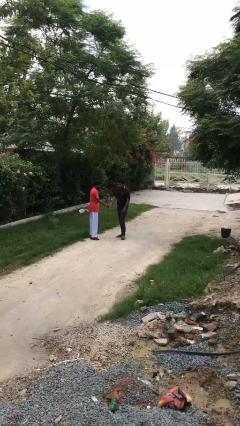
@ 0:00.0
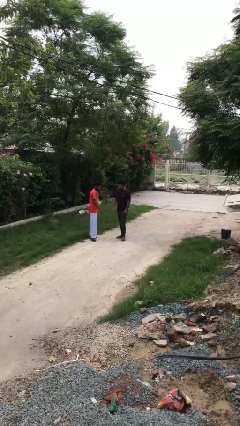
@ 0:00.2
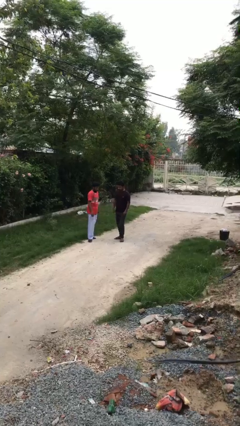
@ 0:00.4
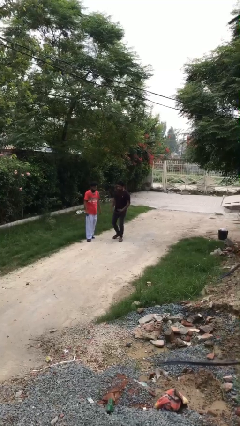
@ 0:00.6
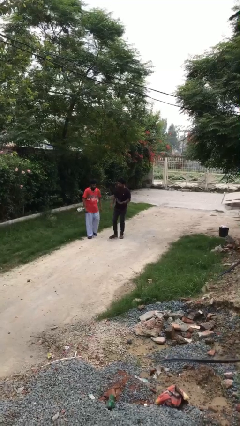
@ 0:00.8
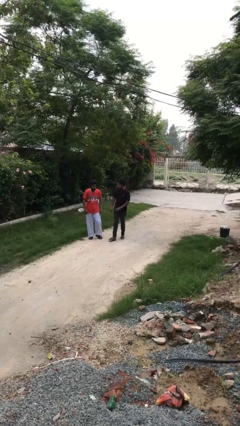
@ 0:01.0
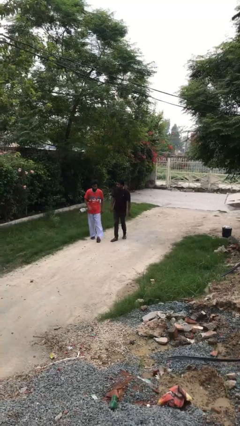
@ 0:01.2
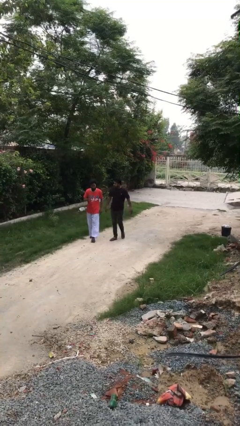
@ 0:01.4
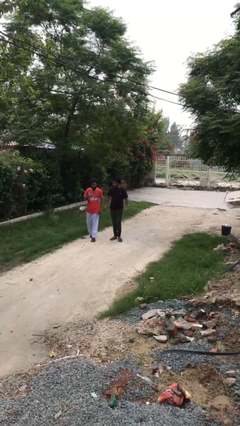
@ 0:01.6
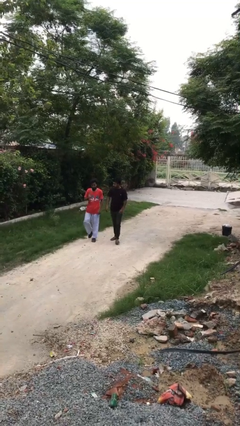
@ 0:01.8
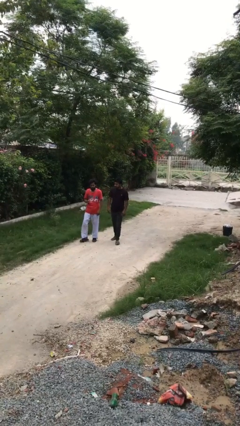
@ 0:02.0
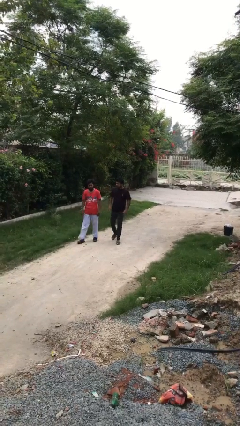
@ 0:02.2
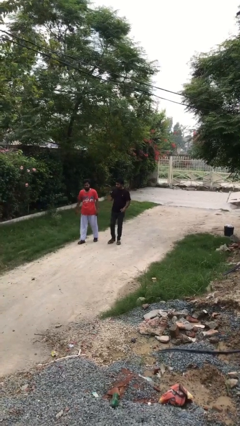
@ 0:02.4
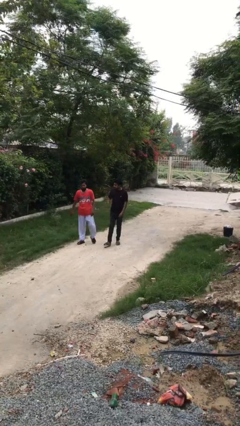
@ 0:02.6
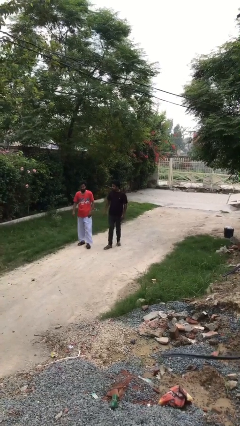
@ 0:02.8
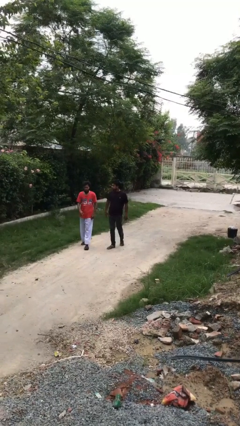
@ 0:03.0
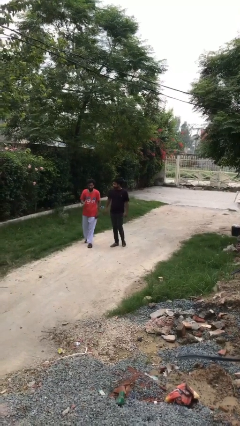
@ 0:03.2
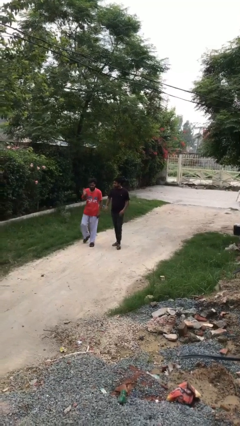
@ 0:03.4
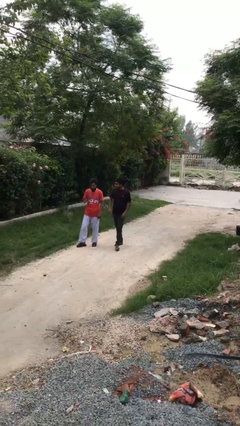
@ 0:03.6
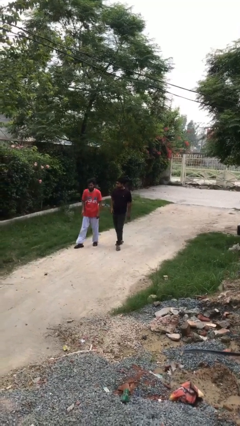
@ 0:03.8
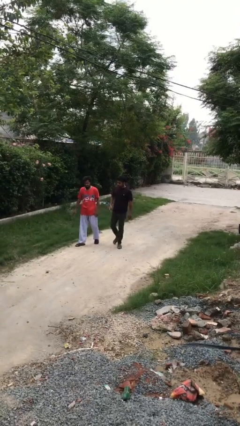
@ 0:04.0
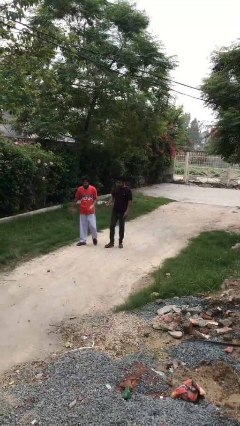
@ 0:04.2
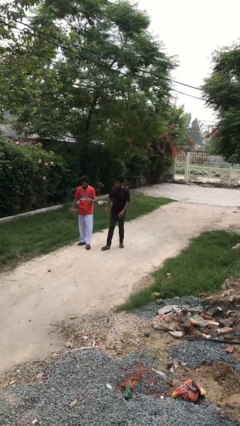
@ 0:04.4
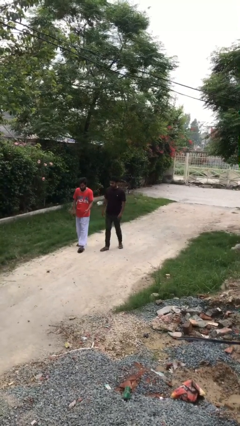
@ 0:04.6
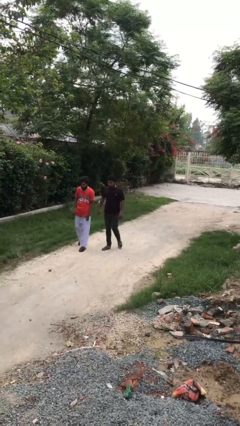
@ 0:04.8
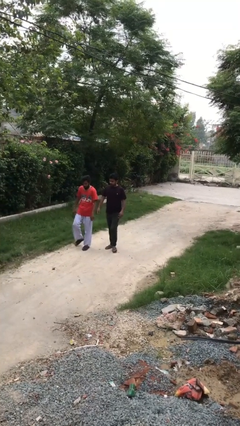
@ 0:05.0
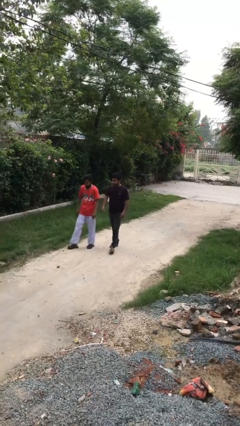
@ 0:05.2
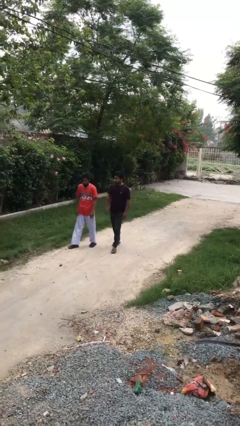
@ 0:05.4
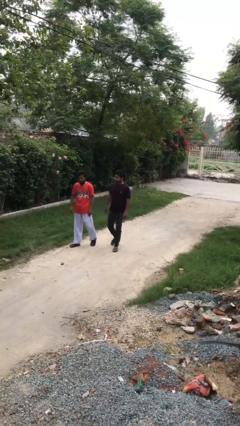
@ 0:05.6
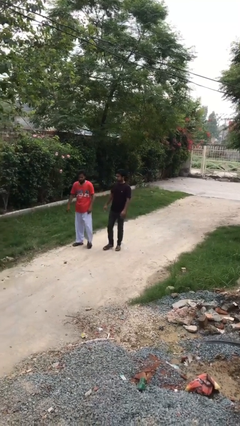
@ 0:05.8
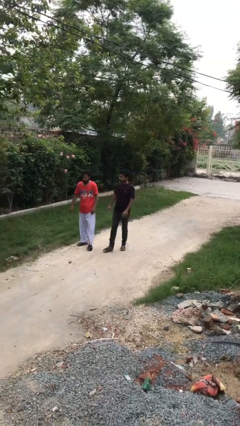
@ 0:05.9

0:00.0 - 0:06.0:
person talks to person

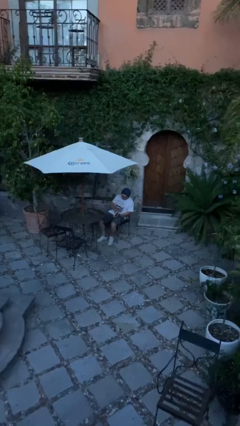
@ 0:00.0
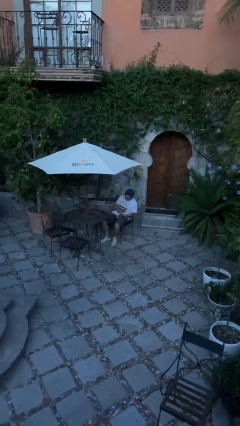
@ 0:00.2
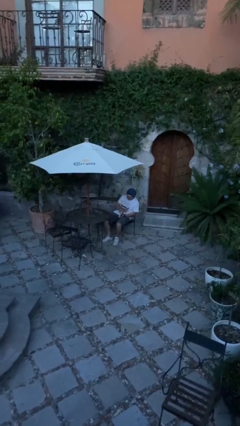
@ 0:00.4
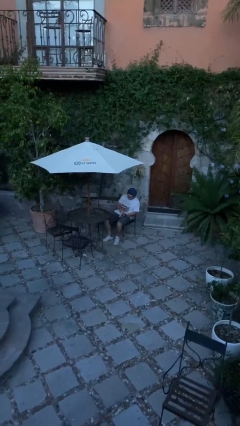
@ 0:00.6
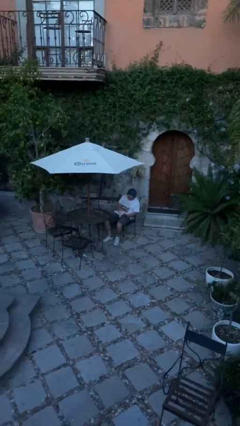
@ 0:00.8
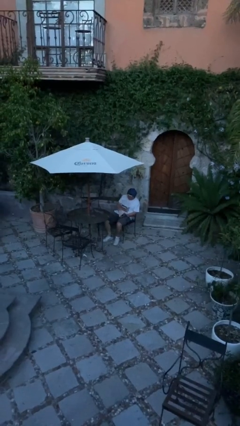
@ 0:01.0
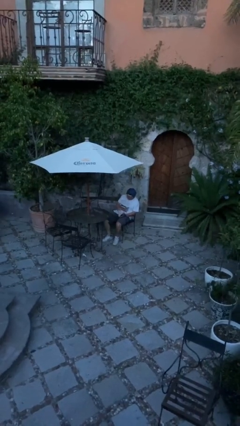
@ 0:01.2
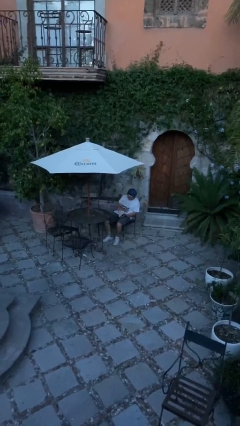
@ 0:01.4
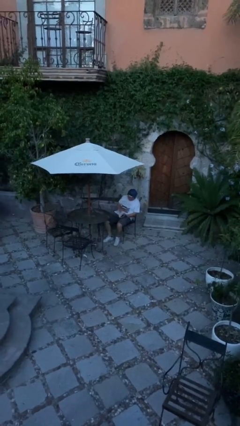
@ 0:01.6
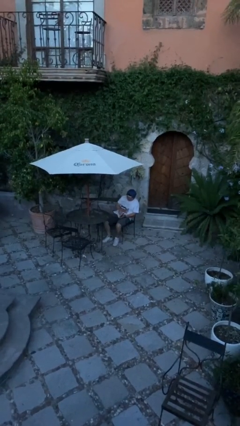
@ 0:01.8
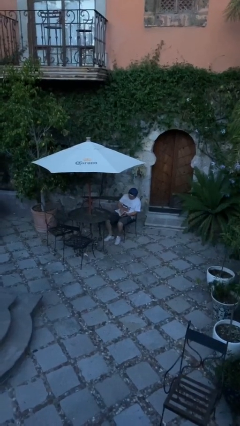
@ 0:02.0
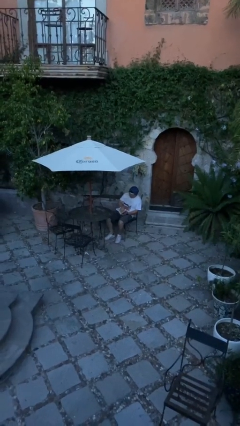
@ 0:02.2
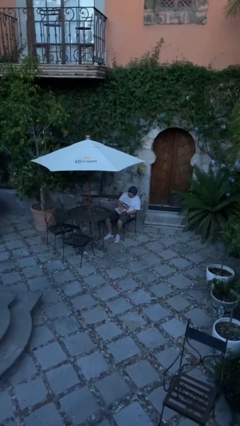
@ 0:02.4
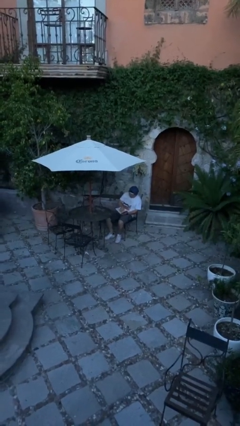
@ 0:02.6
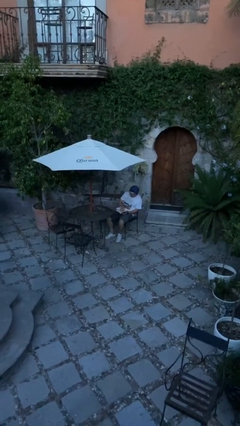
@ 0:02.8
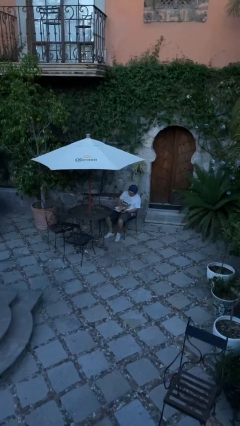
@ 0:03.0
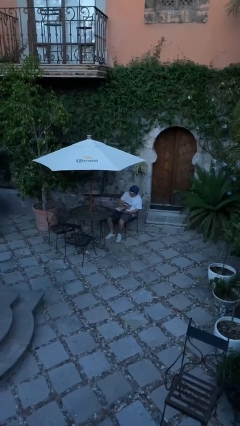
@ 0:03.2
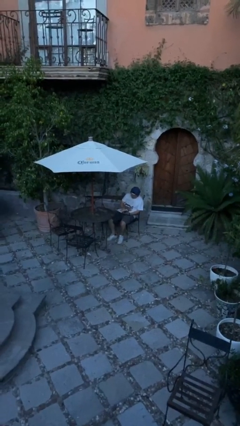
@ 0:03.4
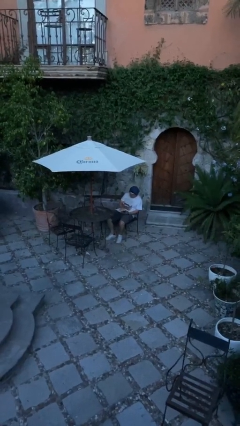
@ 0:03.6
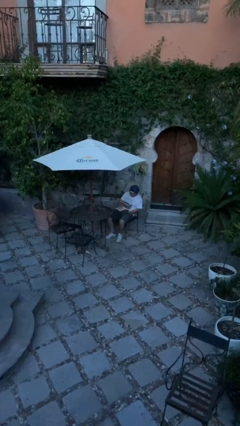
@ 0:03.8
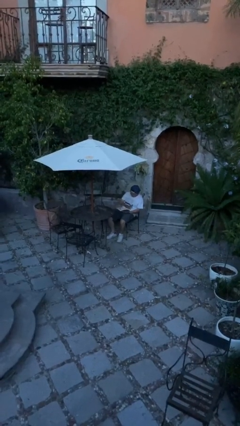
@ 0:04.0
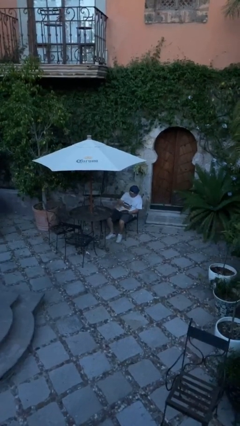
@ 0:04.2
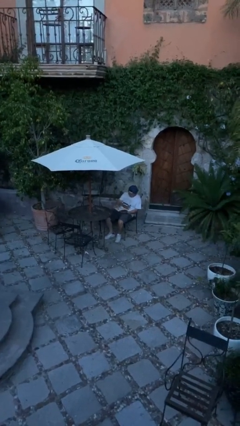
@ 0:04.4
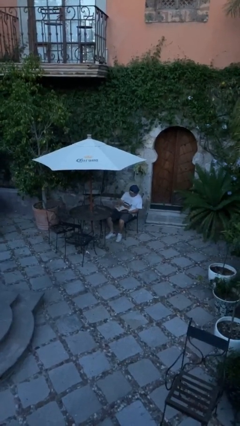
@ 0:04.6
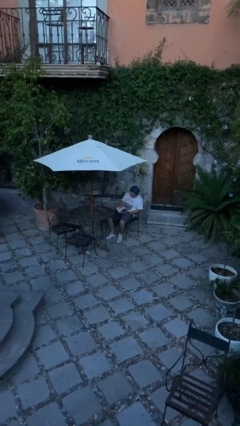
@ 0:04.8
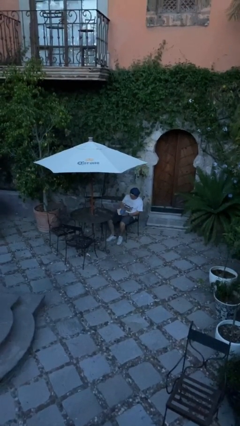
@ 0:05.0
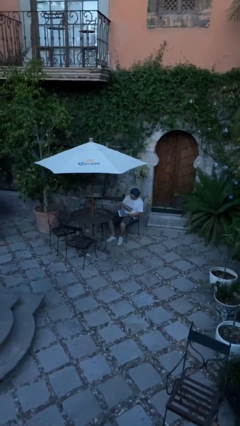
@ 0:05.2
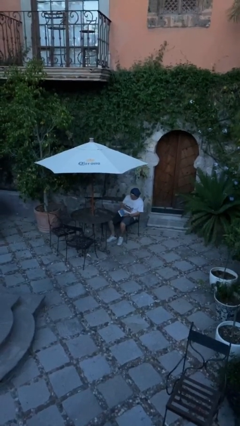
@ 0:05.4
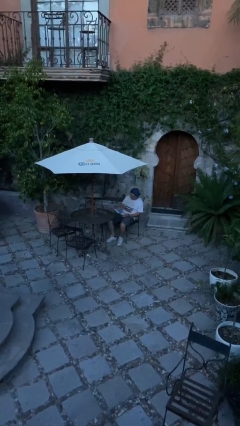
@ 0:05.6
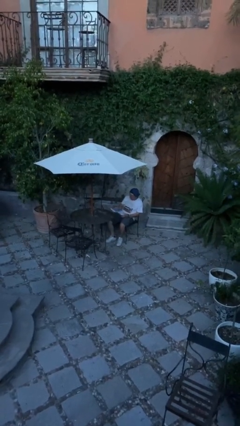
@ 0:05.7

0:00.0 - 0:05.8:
person reads document

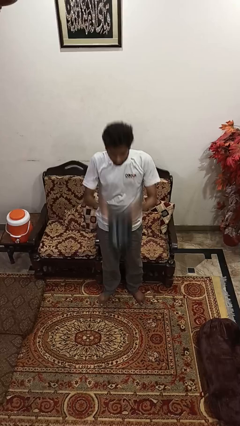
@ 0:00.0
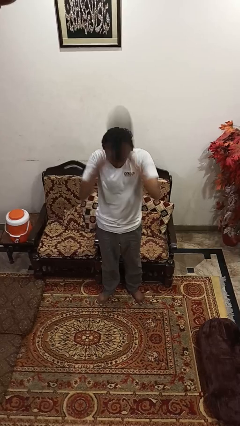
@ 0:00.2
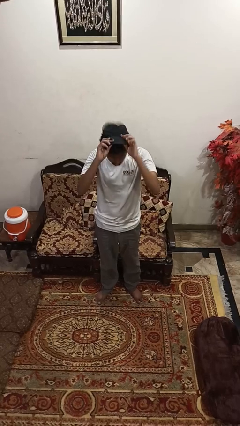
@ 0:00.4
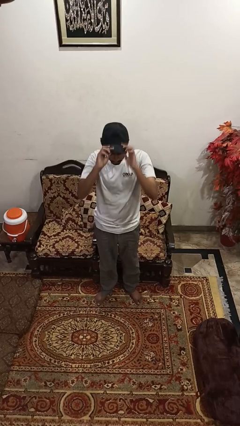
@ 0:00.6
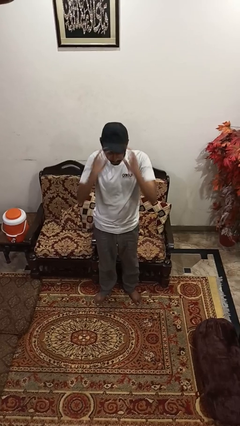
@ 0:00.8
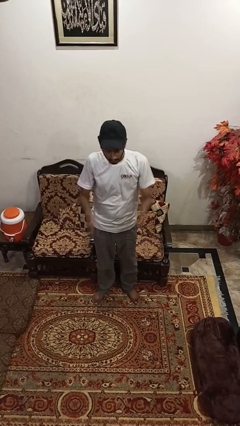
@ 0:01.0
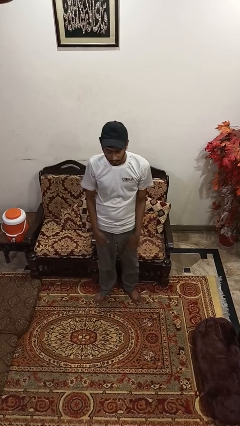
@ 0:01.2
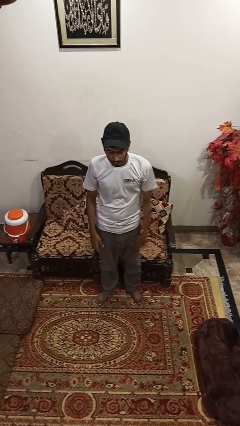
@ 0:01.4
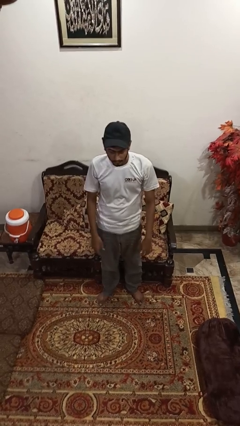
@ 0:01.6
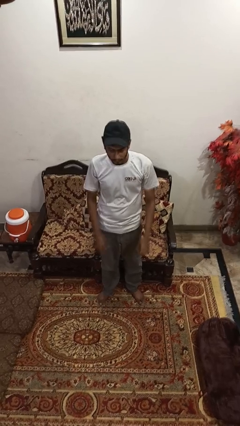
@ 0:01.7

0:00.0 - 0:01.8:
person puts on hat

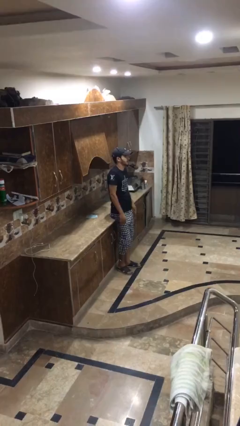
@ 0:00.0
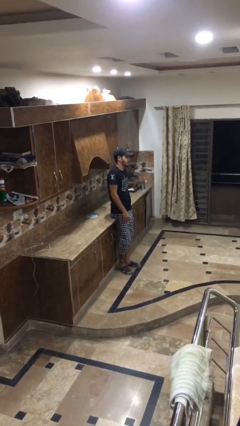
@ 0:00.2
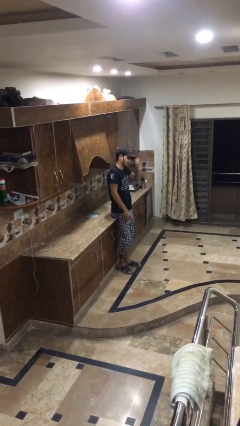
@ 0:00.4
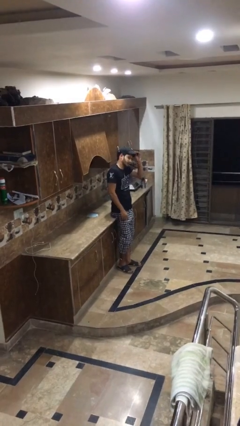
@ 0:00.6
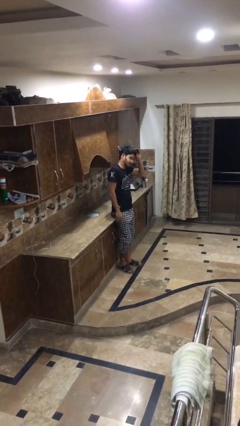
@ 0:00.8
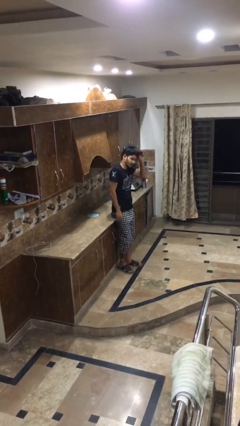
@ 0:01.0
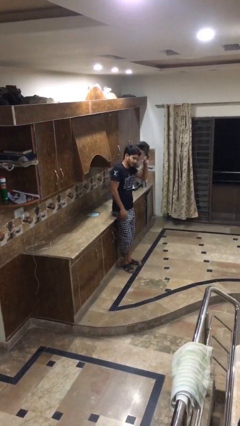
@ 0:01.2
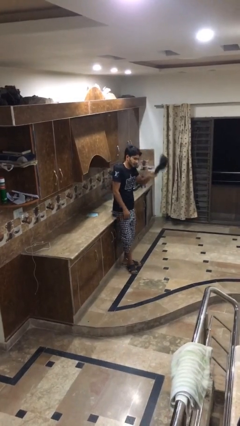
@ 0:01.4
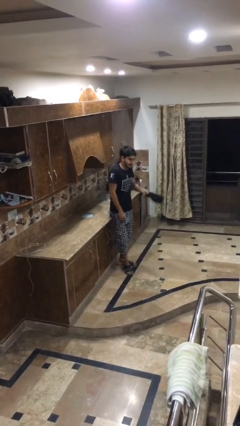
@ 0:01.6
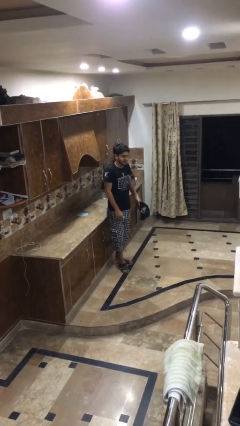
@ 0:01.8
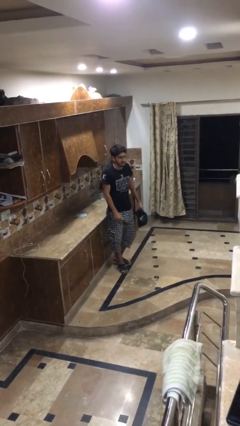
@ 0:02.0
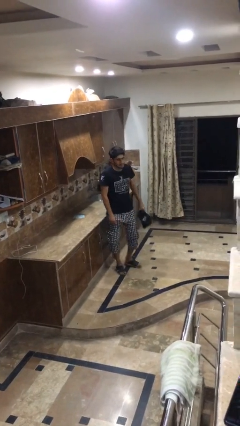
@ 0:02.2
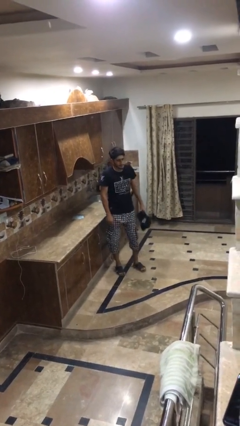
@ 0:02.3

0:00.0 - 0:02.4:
person takes off hat

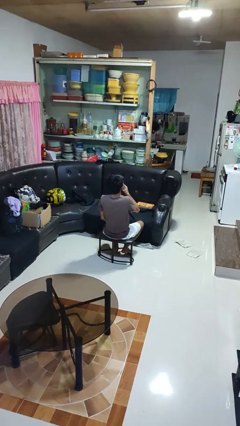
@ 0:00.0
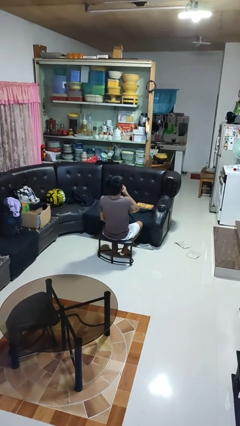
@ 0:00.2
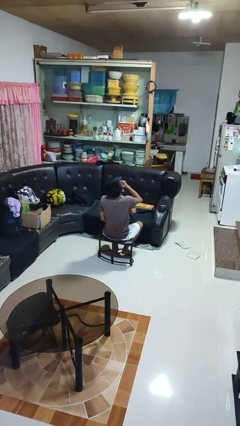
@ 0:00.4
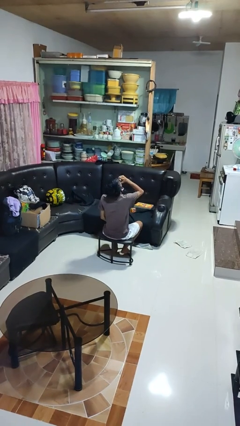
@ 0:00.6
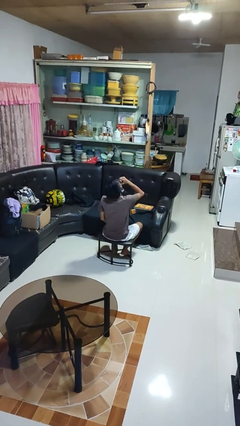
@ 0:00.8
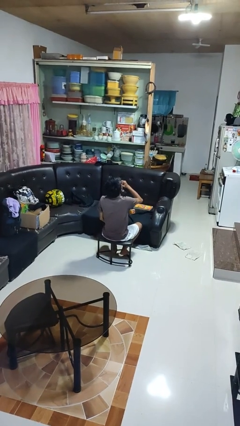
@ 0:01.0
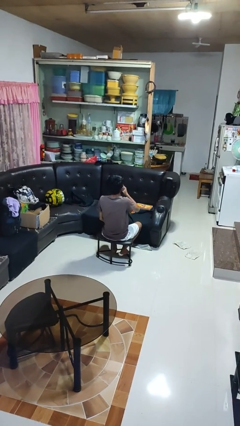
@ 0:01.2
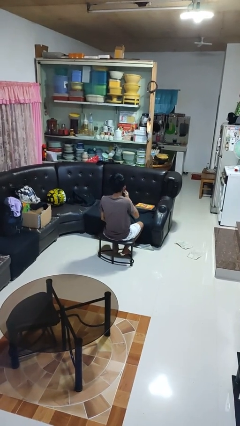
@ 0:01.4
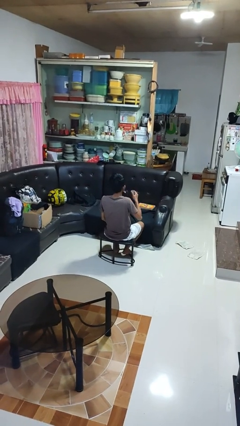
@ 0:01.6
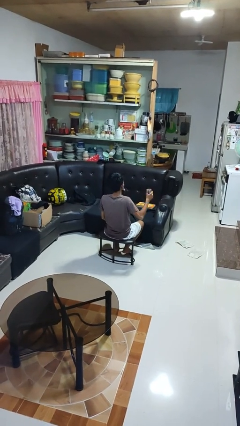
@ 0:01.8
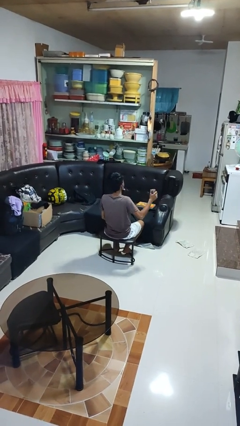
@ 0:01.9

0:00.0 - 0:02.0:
person drinks from beverage can
